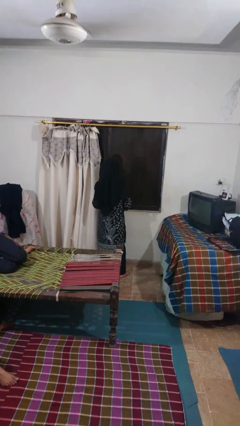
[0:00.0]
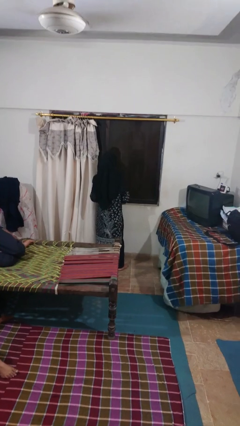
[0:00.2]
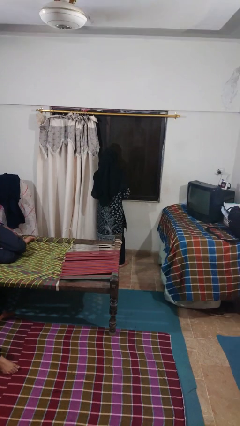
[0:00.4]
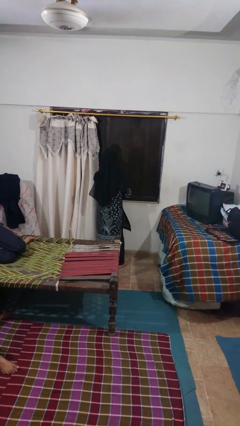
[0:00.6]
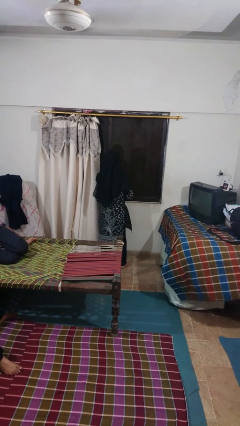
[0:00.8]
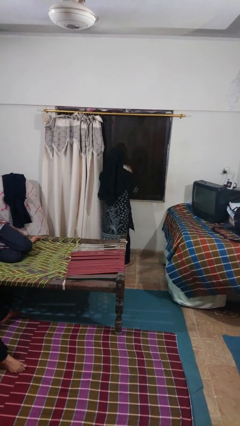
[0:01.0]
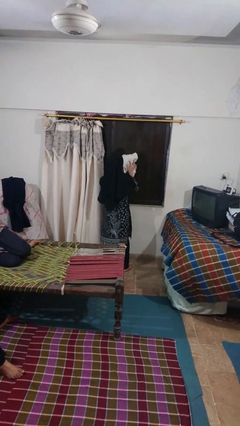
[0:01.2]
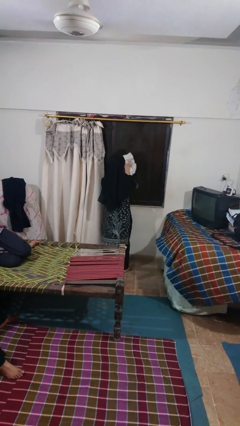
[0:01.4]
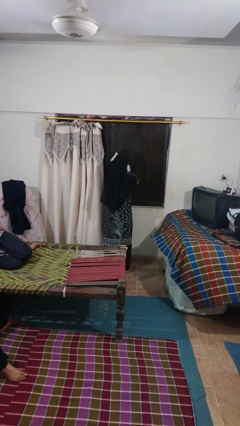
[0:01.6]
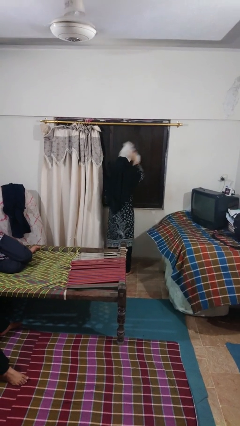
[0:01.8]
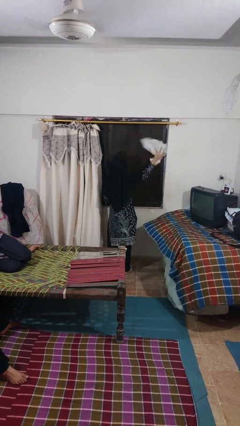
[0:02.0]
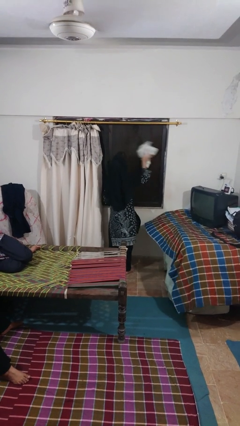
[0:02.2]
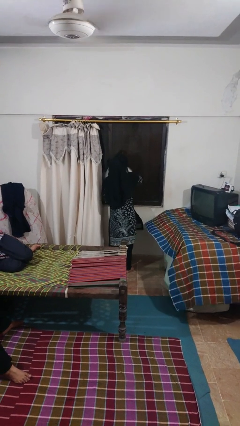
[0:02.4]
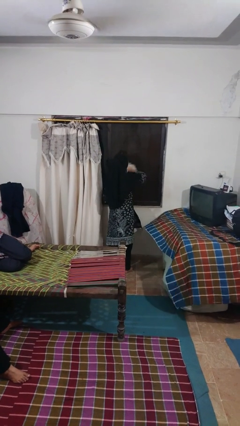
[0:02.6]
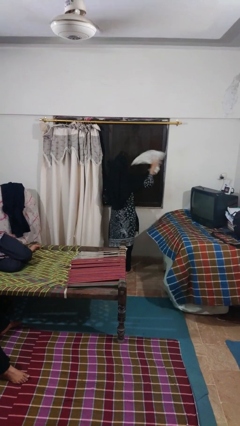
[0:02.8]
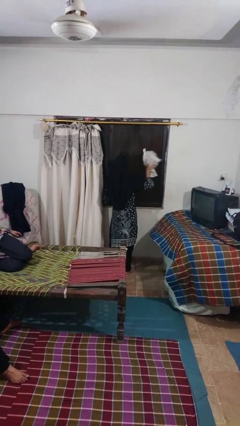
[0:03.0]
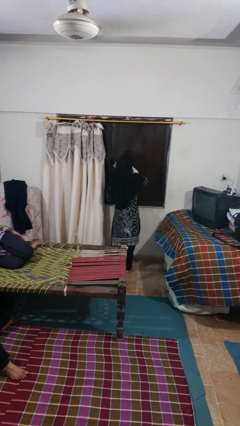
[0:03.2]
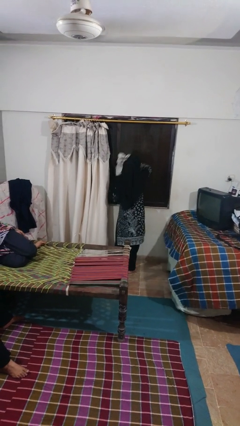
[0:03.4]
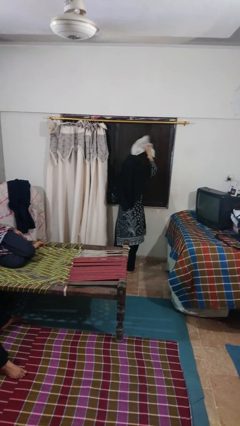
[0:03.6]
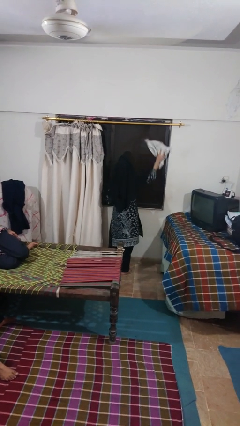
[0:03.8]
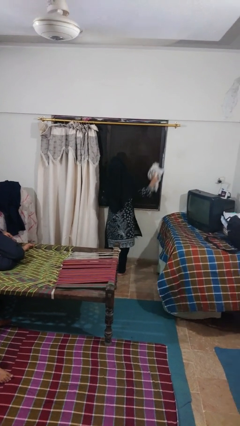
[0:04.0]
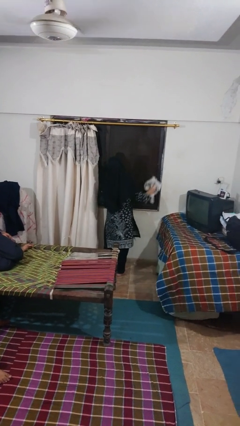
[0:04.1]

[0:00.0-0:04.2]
person washes window

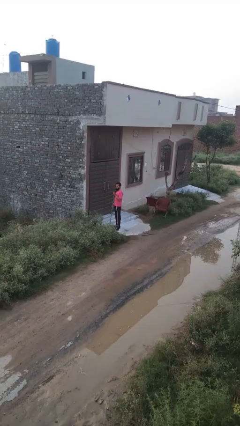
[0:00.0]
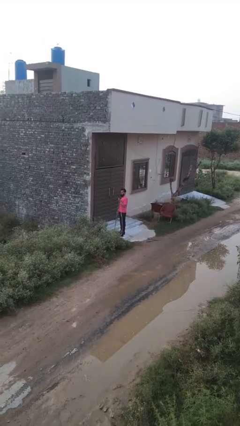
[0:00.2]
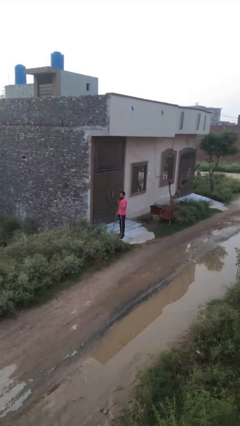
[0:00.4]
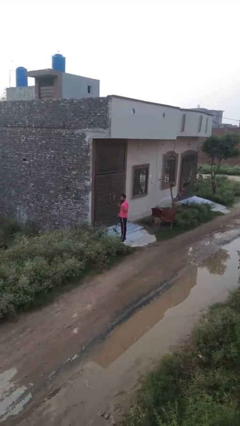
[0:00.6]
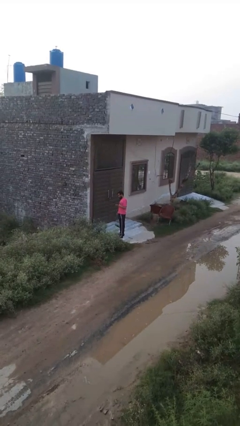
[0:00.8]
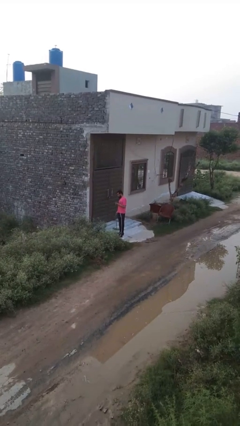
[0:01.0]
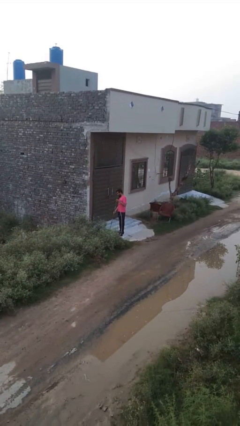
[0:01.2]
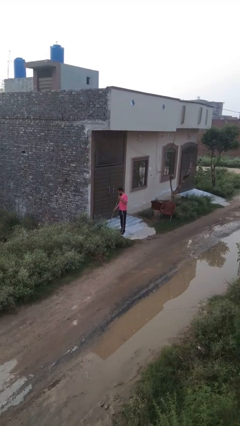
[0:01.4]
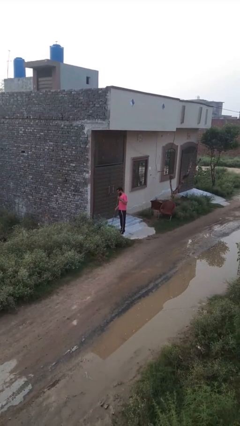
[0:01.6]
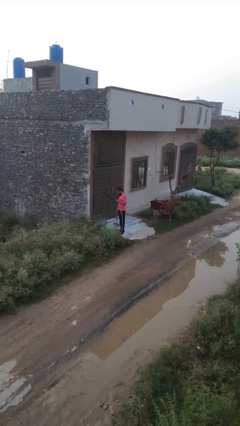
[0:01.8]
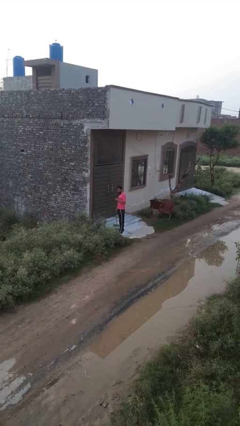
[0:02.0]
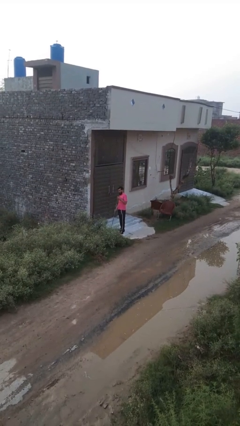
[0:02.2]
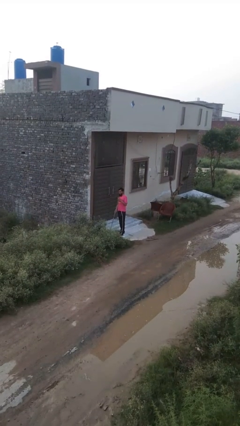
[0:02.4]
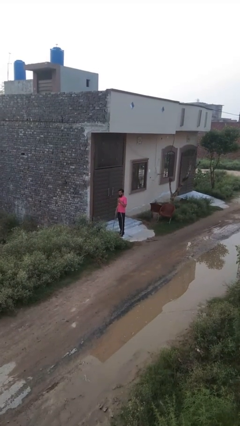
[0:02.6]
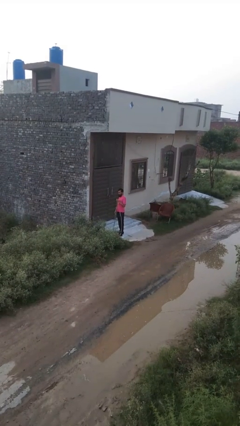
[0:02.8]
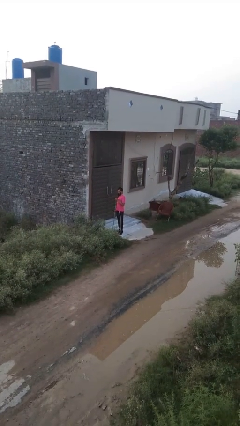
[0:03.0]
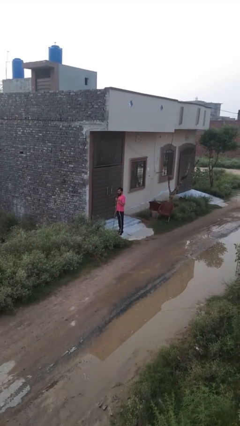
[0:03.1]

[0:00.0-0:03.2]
person sweeps floor

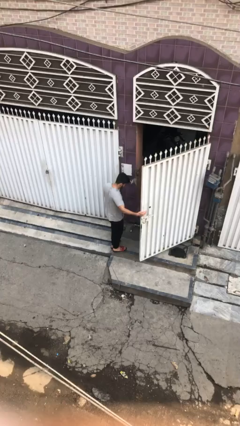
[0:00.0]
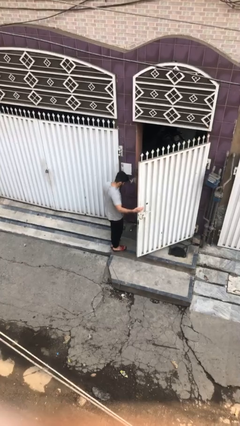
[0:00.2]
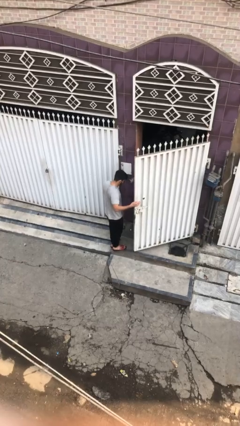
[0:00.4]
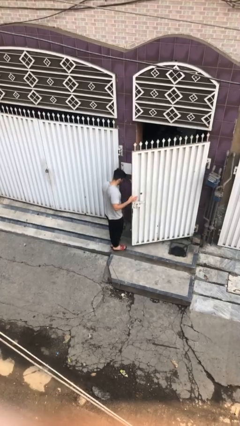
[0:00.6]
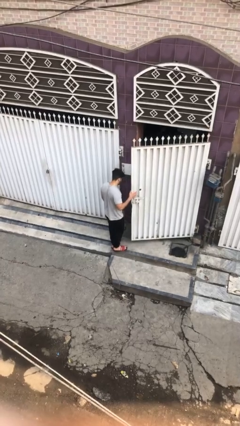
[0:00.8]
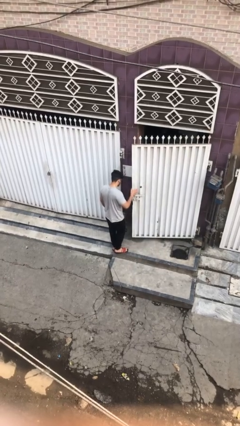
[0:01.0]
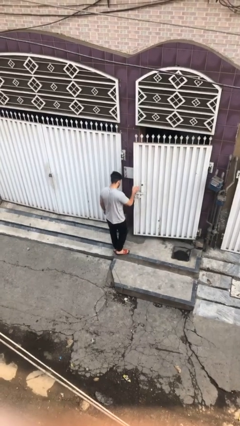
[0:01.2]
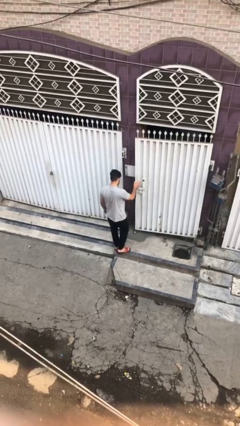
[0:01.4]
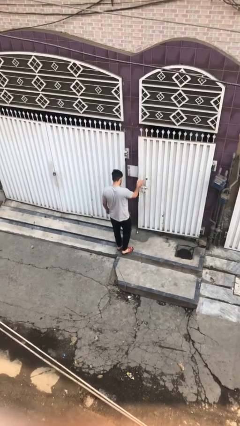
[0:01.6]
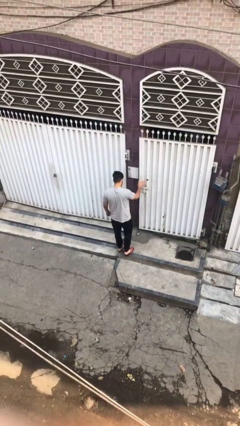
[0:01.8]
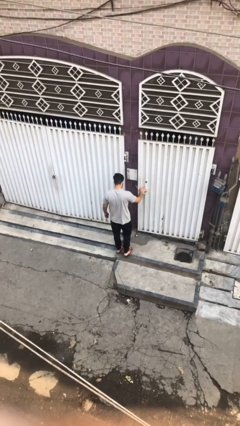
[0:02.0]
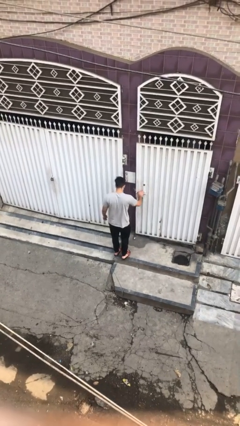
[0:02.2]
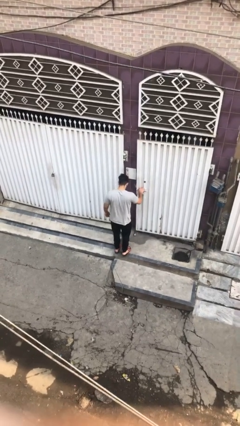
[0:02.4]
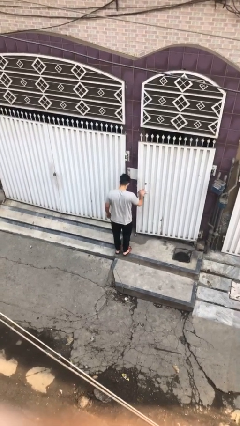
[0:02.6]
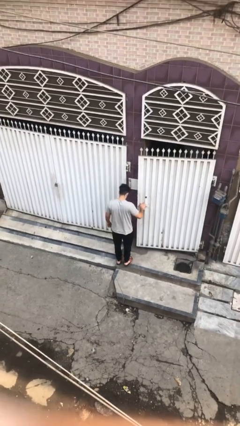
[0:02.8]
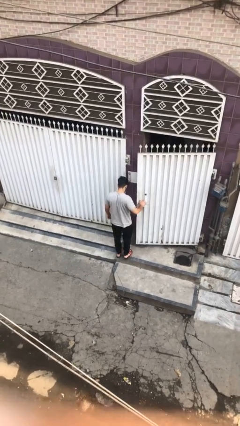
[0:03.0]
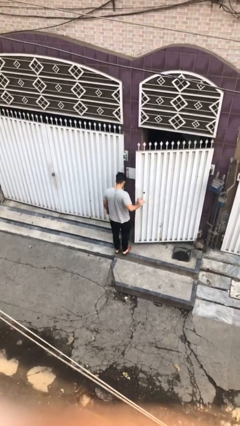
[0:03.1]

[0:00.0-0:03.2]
person closes facility door

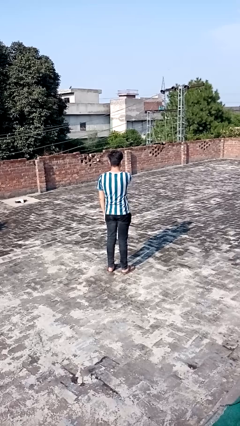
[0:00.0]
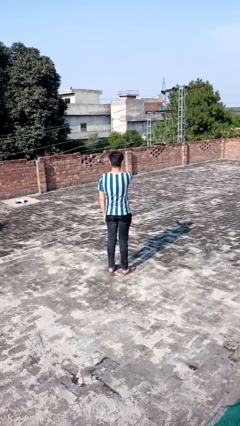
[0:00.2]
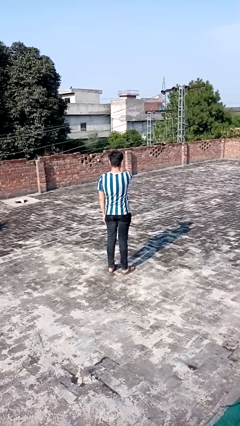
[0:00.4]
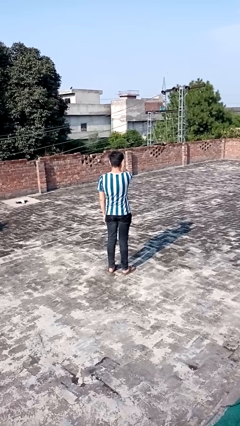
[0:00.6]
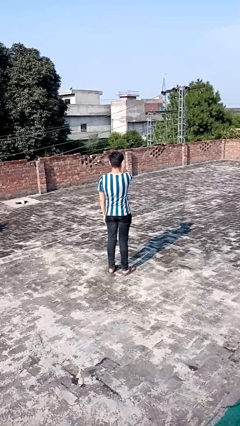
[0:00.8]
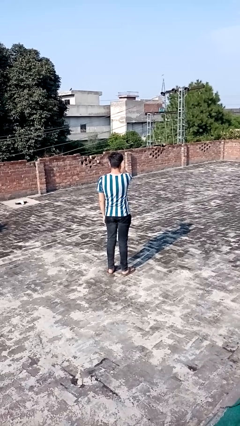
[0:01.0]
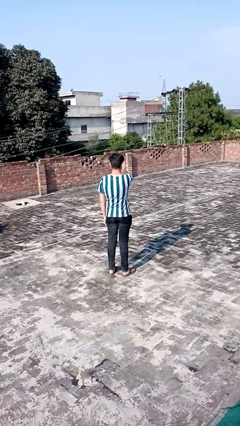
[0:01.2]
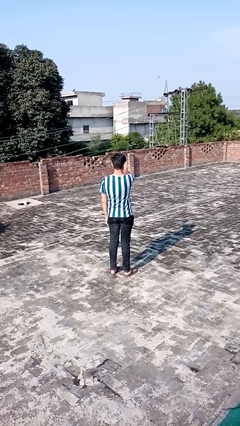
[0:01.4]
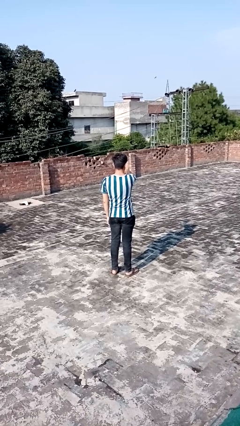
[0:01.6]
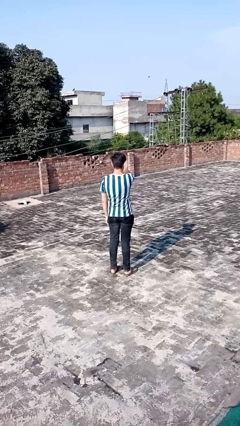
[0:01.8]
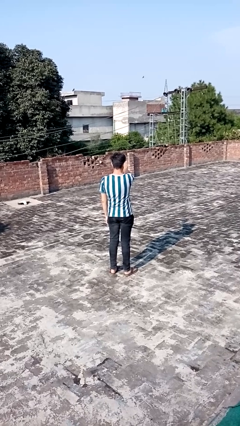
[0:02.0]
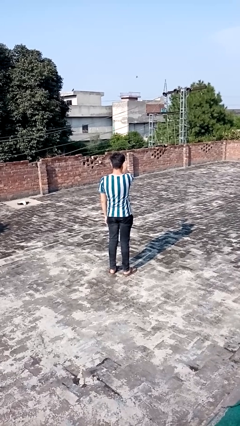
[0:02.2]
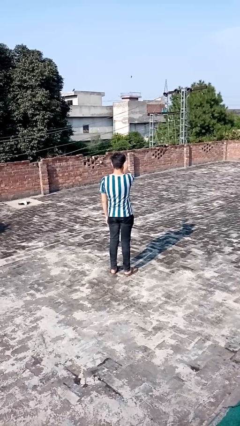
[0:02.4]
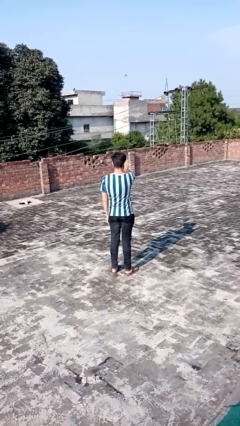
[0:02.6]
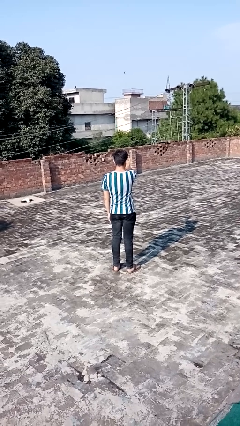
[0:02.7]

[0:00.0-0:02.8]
person gestures stop

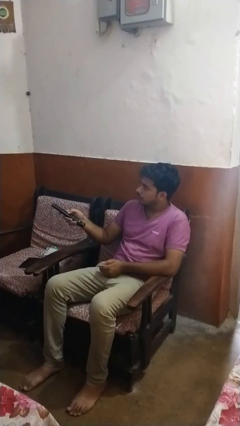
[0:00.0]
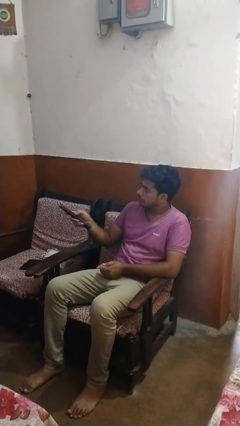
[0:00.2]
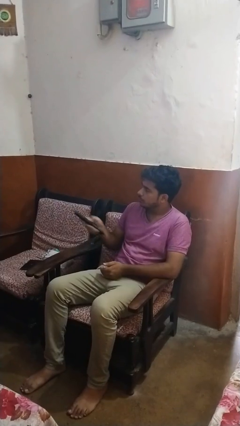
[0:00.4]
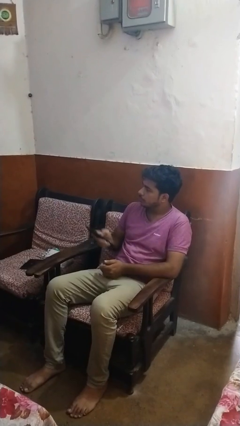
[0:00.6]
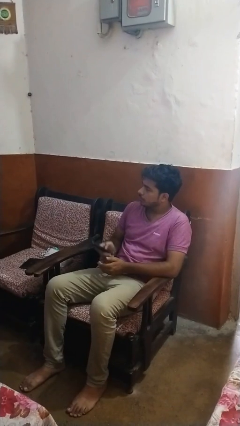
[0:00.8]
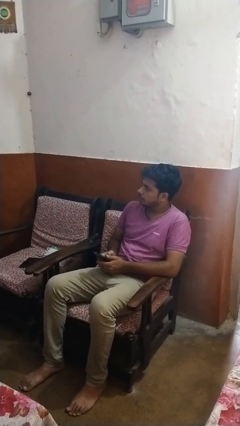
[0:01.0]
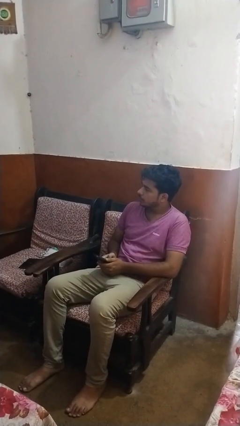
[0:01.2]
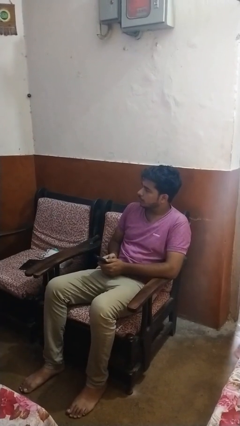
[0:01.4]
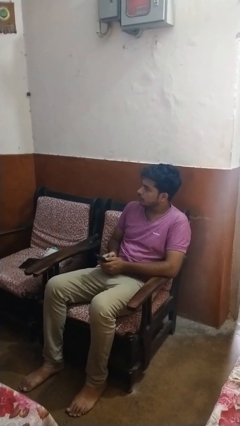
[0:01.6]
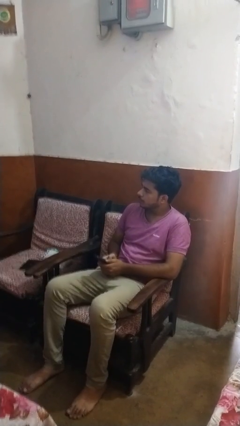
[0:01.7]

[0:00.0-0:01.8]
person uses television remote

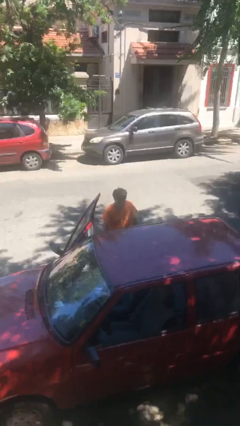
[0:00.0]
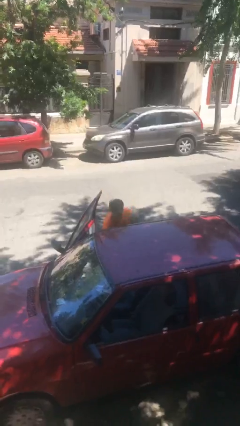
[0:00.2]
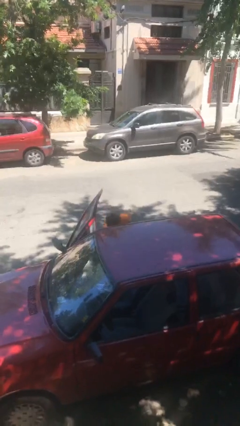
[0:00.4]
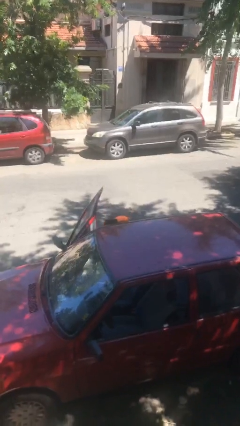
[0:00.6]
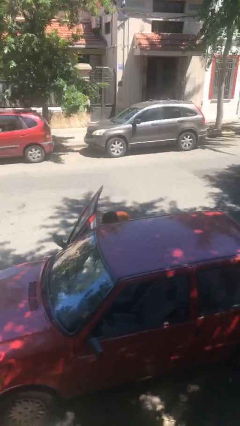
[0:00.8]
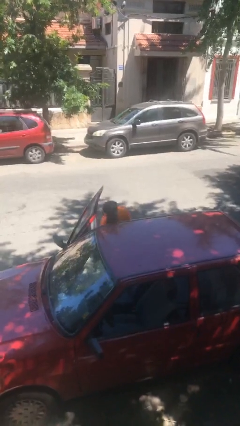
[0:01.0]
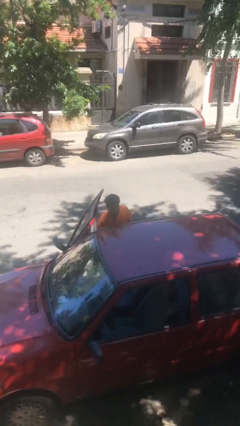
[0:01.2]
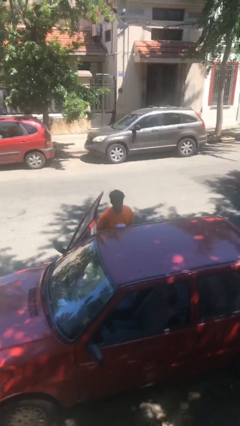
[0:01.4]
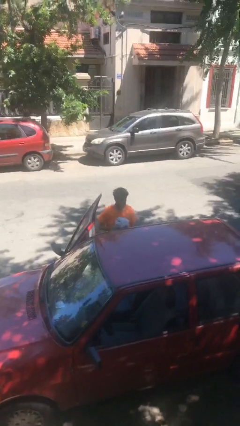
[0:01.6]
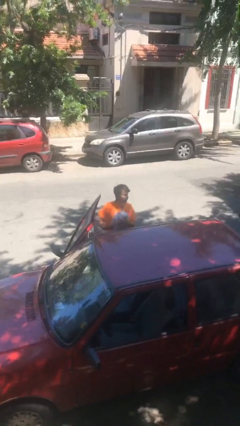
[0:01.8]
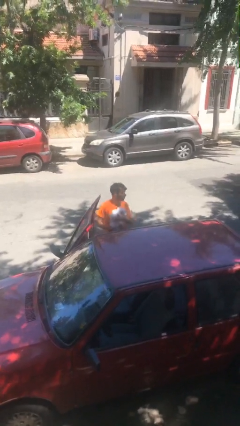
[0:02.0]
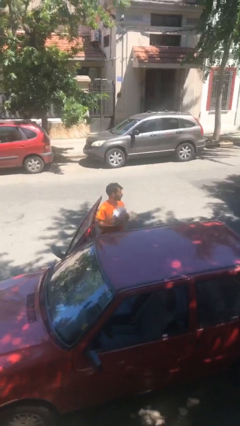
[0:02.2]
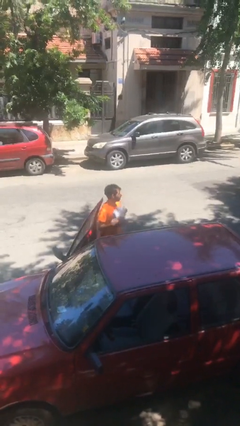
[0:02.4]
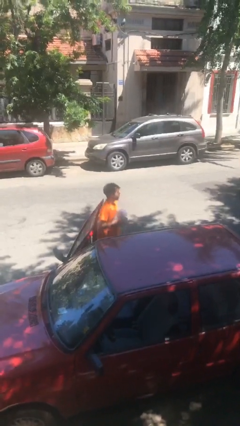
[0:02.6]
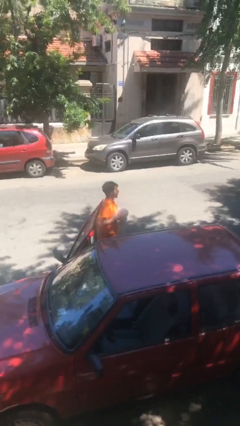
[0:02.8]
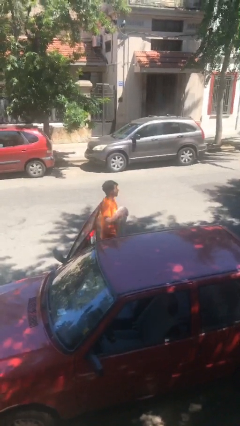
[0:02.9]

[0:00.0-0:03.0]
person unloads car
